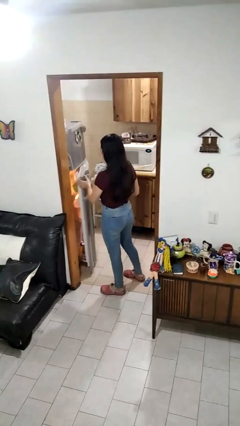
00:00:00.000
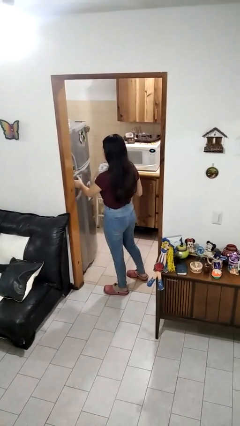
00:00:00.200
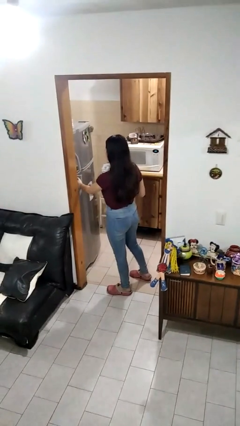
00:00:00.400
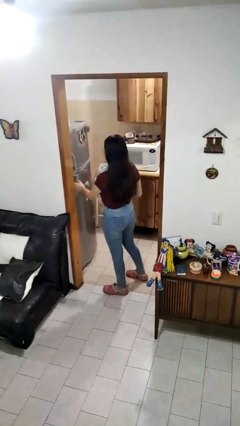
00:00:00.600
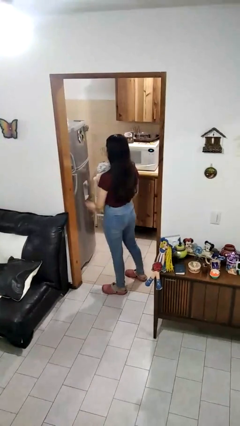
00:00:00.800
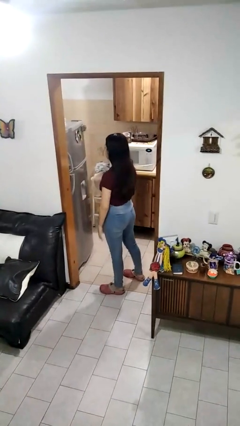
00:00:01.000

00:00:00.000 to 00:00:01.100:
person closes refrigerator

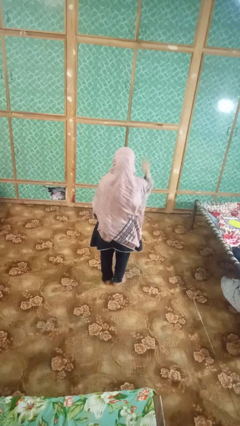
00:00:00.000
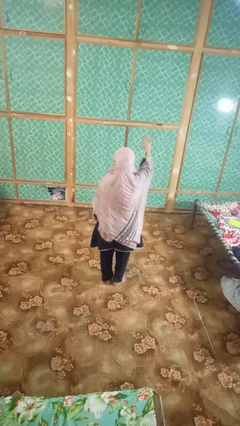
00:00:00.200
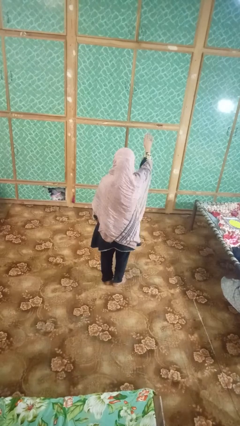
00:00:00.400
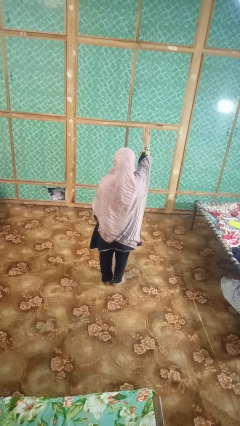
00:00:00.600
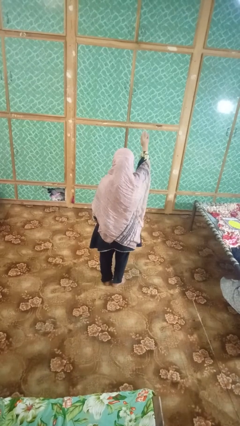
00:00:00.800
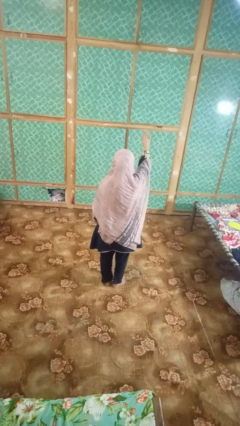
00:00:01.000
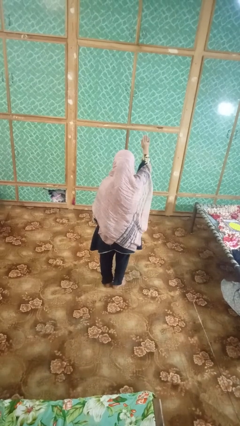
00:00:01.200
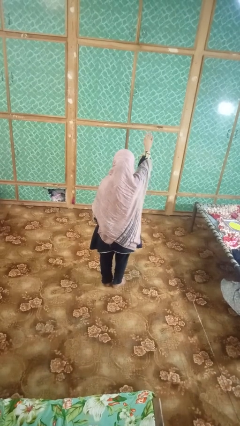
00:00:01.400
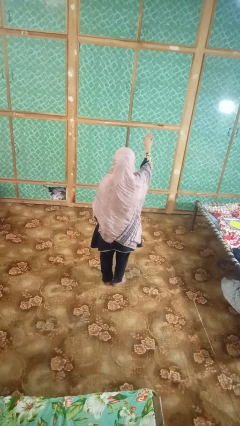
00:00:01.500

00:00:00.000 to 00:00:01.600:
person gestures stop

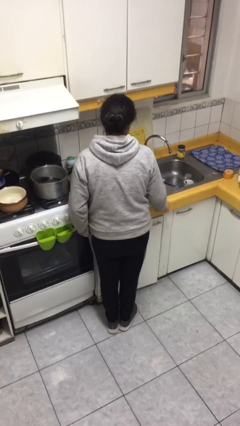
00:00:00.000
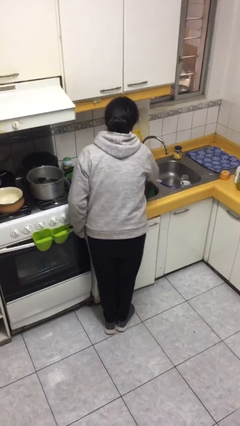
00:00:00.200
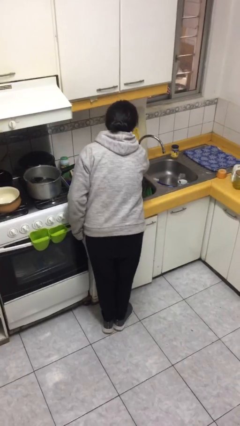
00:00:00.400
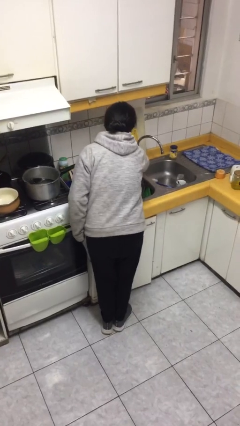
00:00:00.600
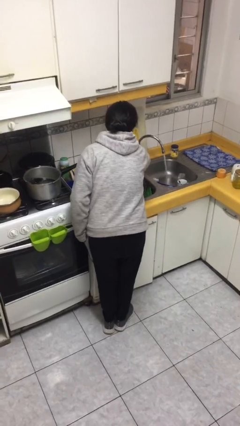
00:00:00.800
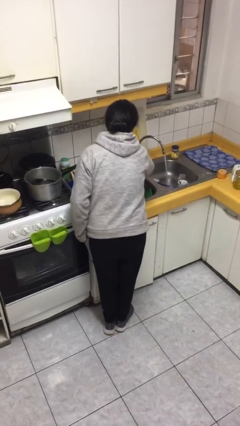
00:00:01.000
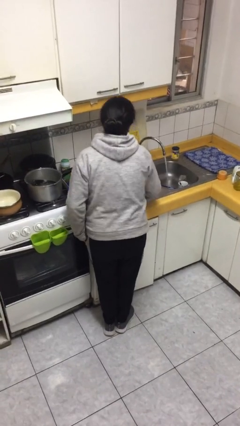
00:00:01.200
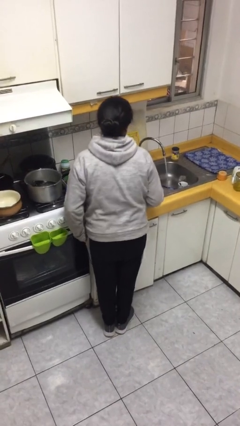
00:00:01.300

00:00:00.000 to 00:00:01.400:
person turns on faucet

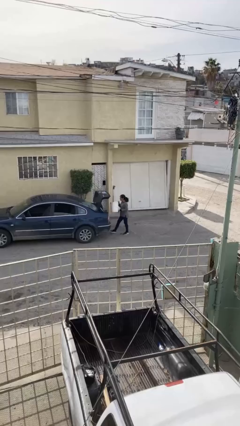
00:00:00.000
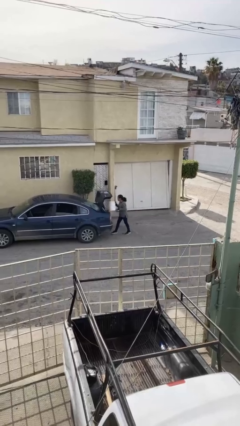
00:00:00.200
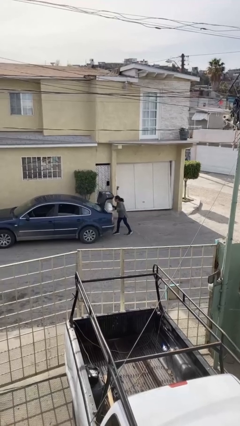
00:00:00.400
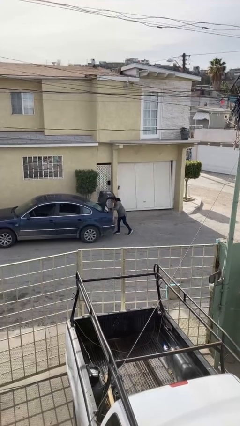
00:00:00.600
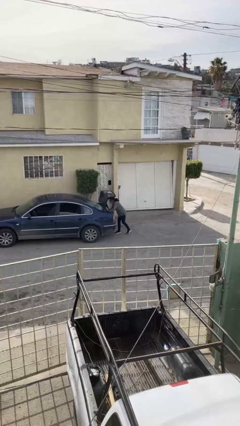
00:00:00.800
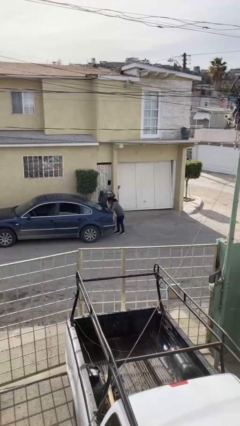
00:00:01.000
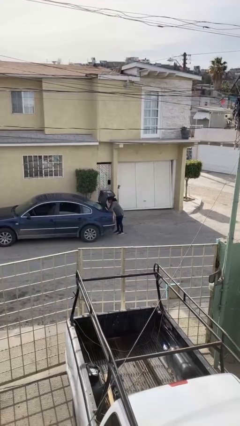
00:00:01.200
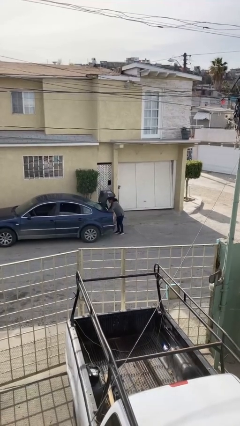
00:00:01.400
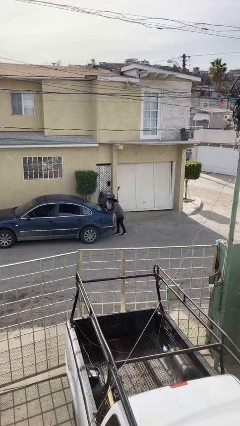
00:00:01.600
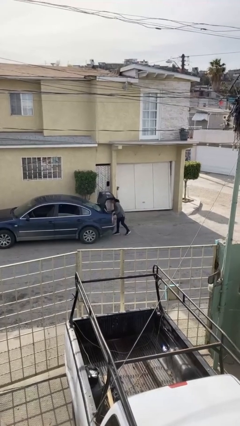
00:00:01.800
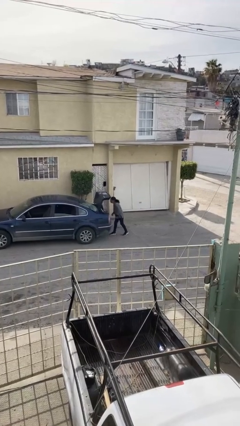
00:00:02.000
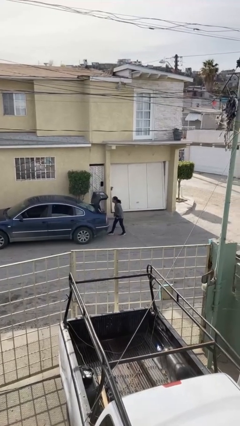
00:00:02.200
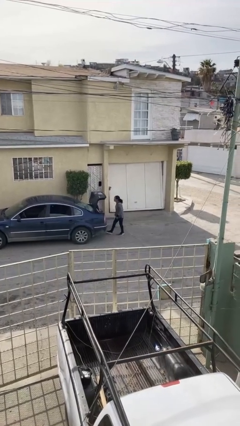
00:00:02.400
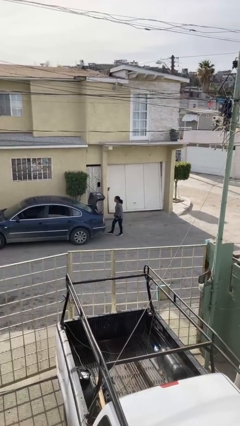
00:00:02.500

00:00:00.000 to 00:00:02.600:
person loads car

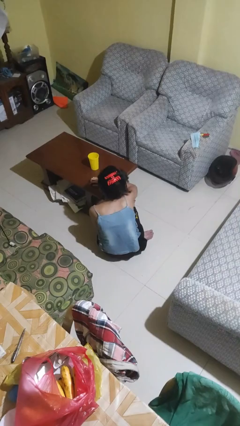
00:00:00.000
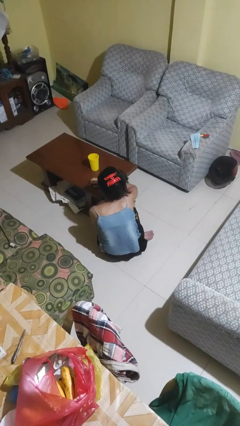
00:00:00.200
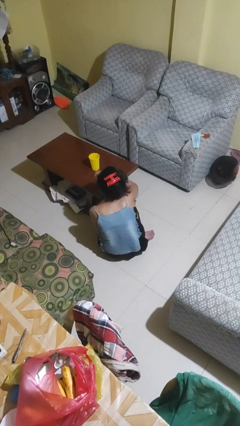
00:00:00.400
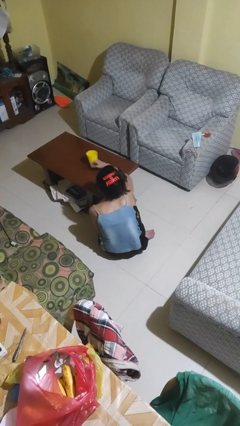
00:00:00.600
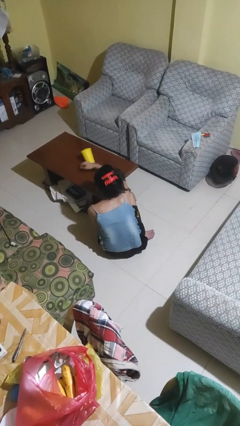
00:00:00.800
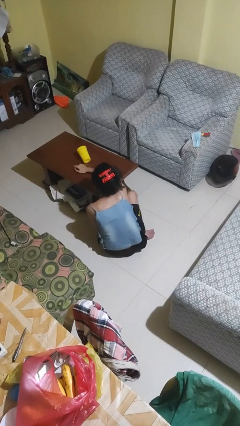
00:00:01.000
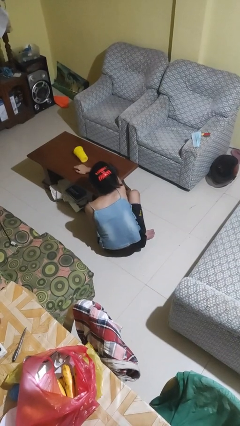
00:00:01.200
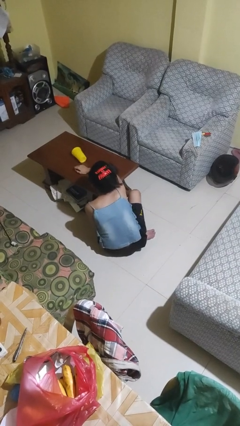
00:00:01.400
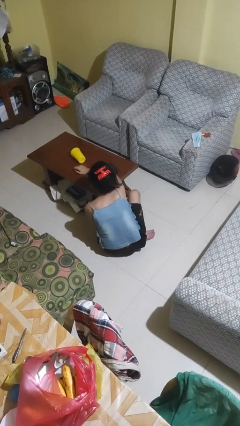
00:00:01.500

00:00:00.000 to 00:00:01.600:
person knocks over glass

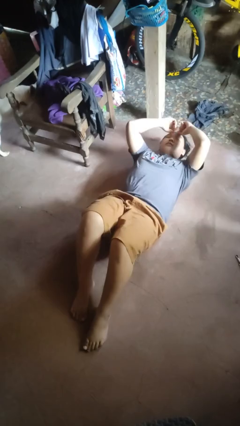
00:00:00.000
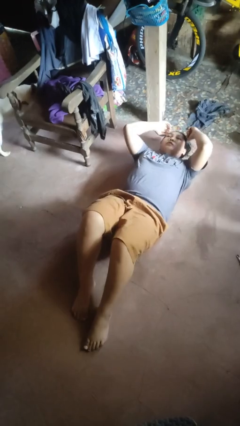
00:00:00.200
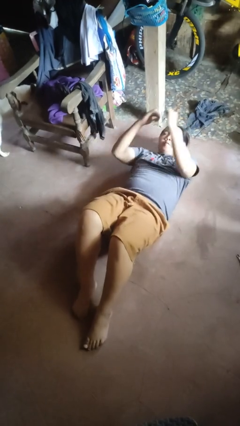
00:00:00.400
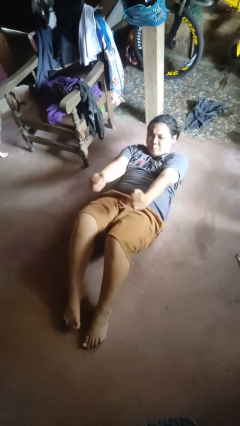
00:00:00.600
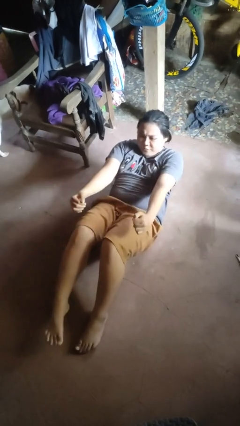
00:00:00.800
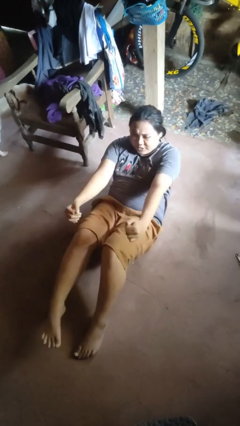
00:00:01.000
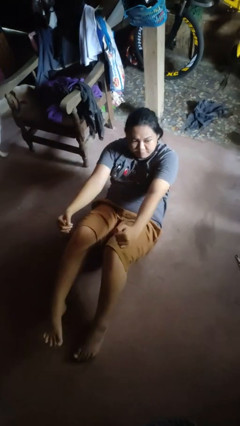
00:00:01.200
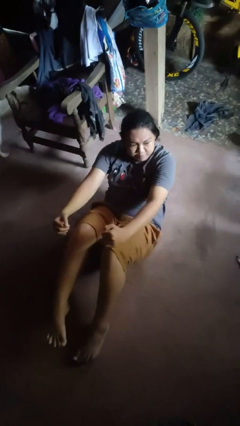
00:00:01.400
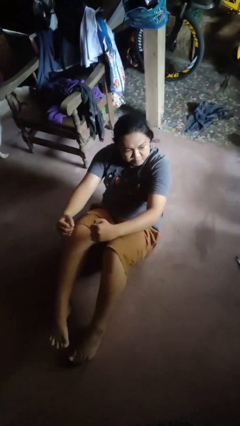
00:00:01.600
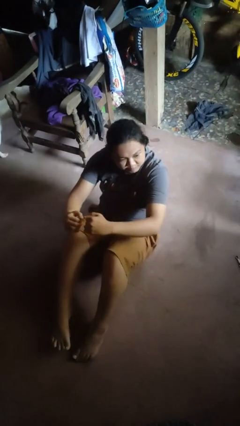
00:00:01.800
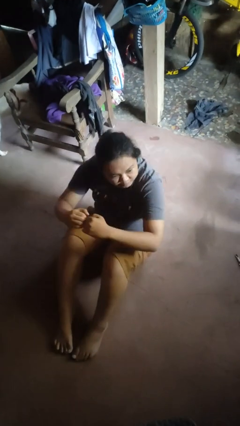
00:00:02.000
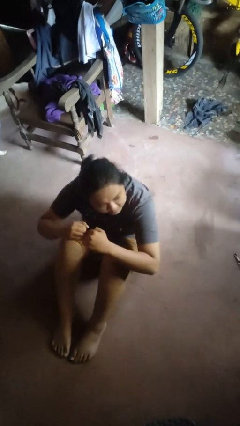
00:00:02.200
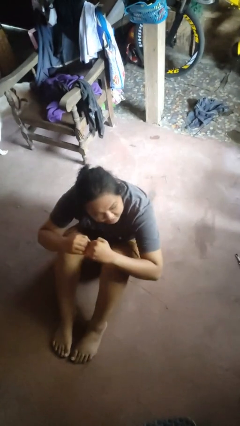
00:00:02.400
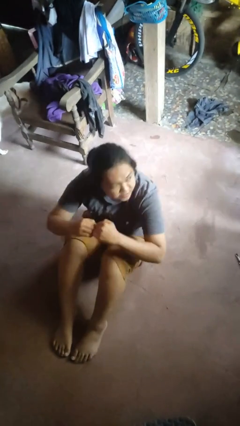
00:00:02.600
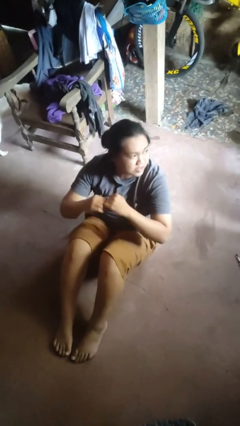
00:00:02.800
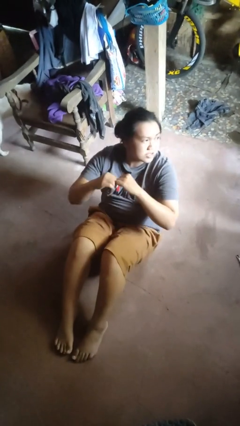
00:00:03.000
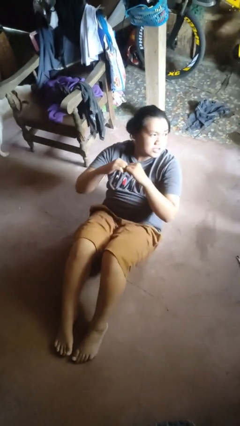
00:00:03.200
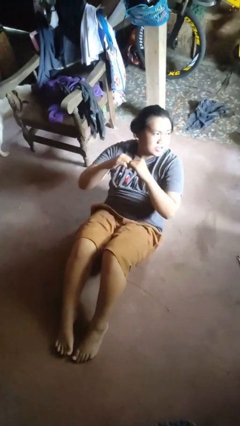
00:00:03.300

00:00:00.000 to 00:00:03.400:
person exercises with situp

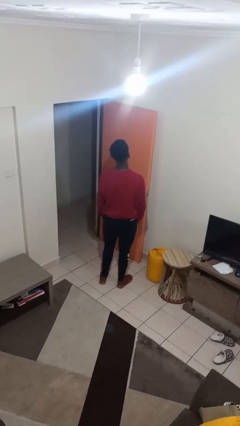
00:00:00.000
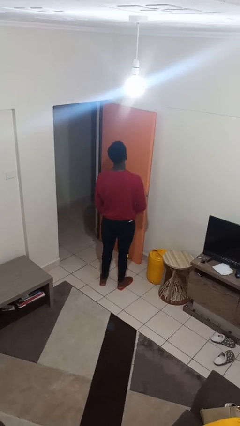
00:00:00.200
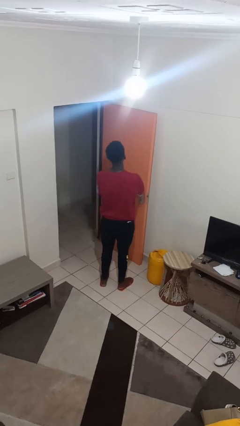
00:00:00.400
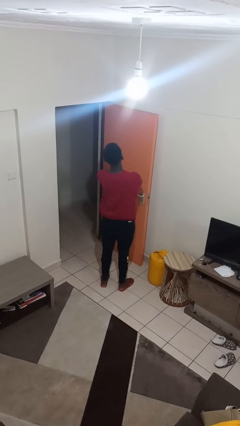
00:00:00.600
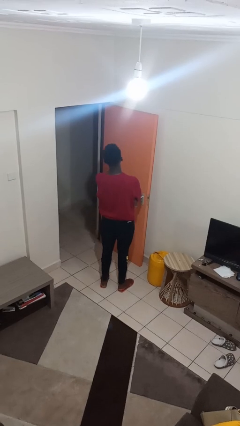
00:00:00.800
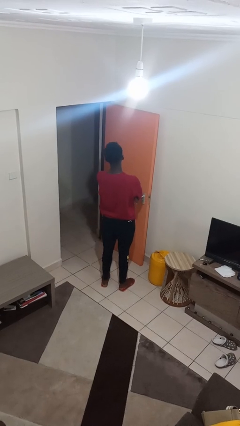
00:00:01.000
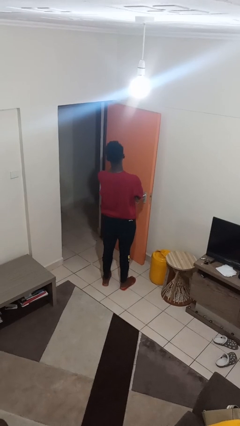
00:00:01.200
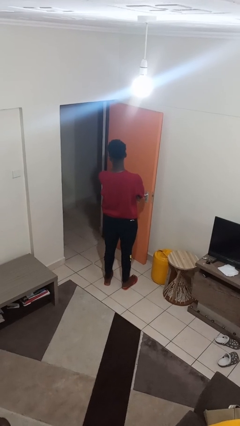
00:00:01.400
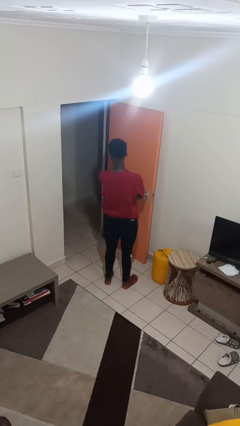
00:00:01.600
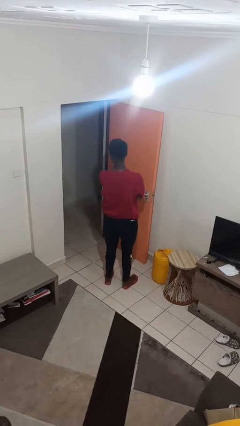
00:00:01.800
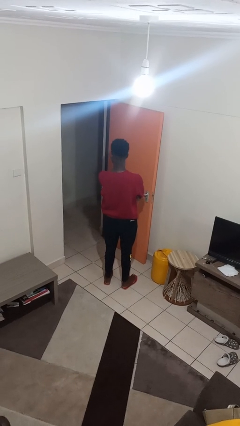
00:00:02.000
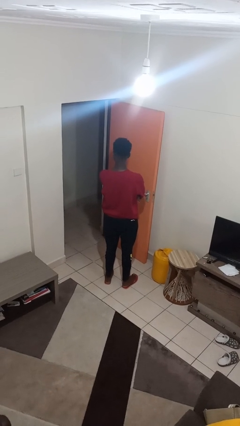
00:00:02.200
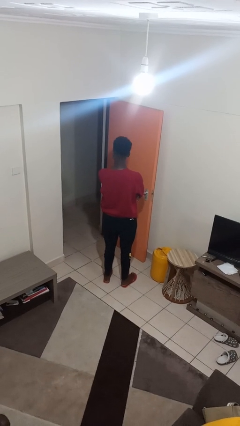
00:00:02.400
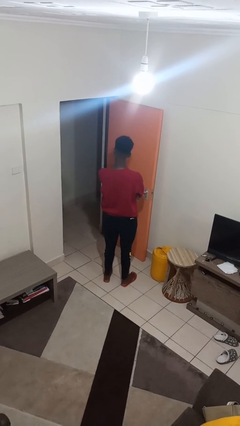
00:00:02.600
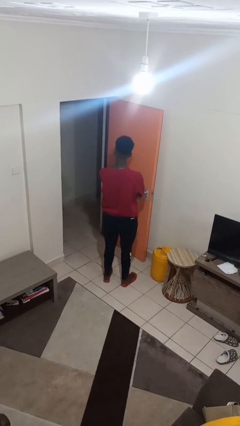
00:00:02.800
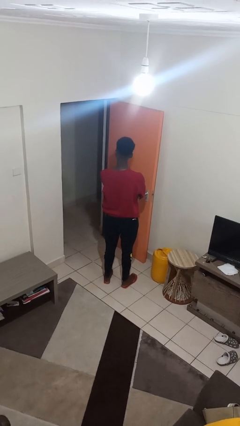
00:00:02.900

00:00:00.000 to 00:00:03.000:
person crosses arms

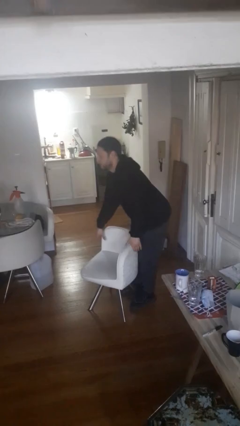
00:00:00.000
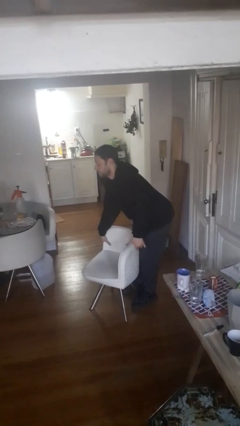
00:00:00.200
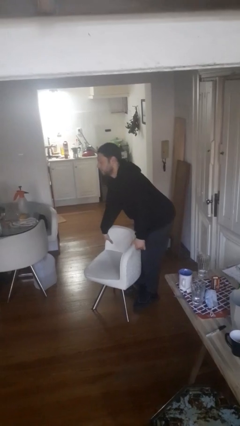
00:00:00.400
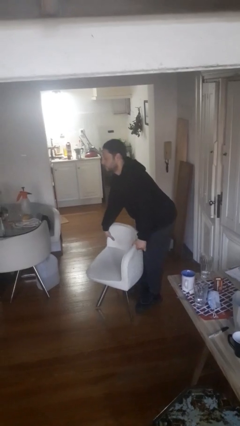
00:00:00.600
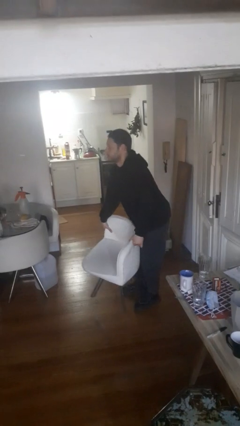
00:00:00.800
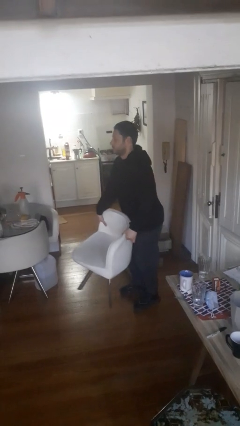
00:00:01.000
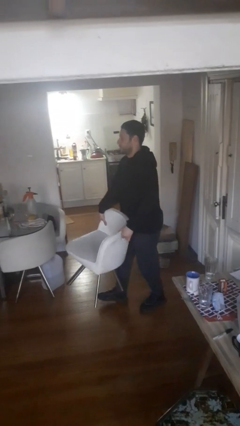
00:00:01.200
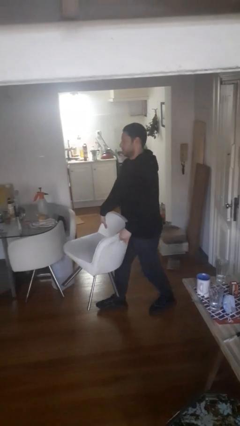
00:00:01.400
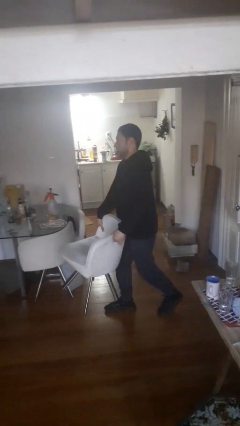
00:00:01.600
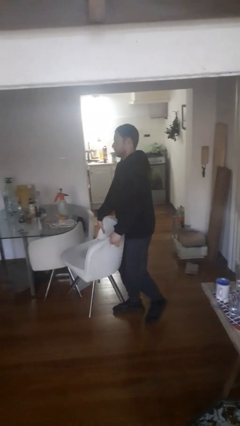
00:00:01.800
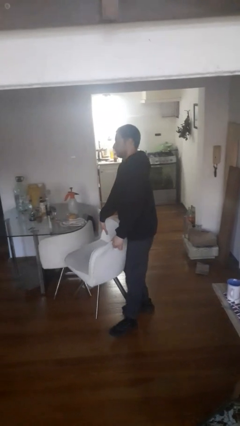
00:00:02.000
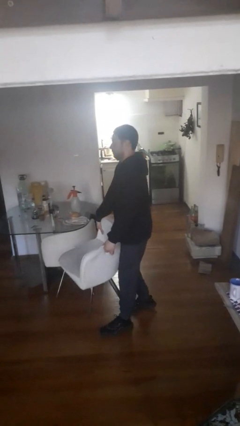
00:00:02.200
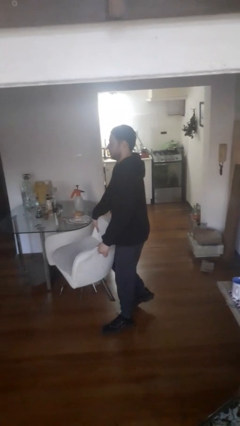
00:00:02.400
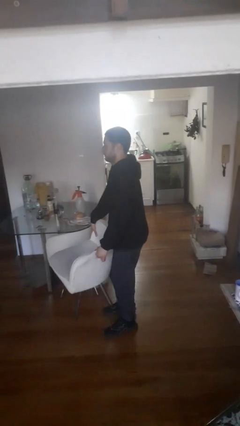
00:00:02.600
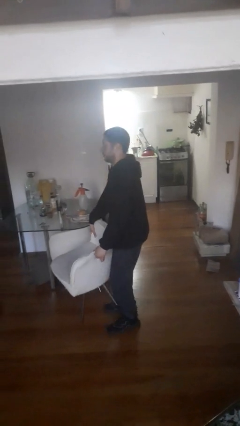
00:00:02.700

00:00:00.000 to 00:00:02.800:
person carries furniture
